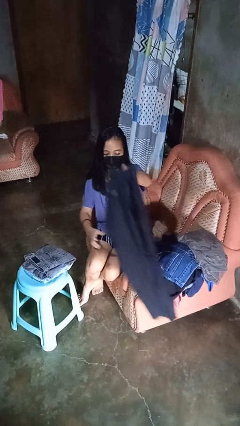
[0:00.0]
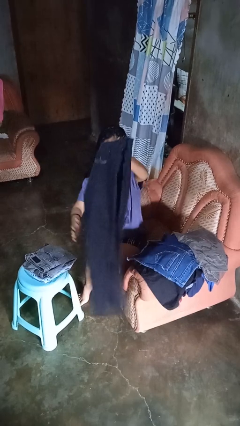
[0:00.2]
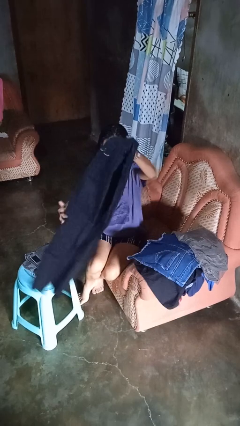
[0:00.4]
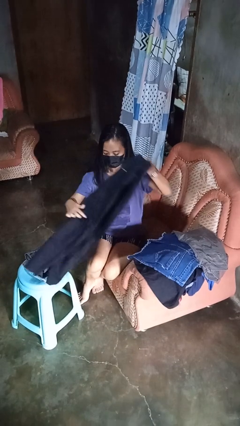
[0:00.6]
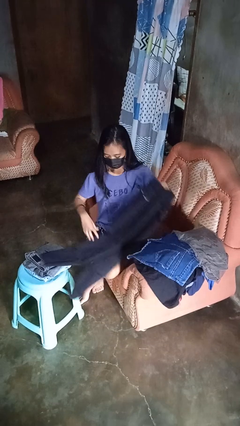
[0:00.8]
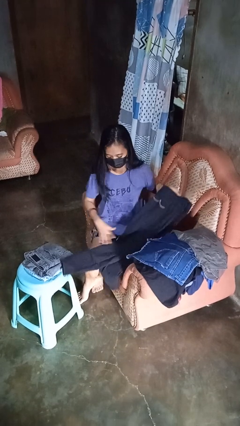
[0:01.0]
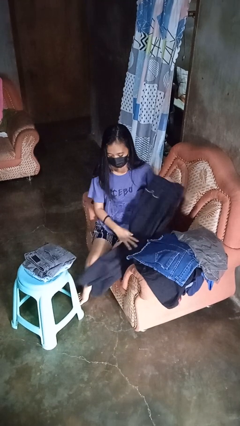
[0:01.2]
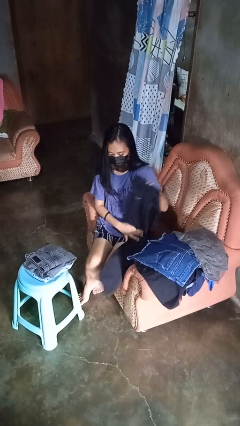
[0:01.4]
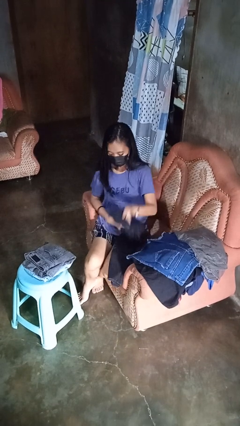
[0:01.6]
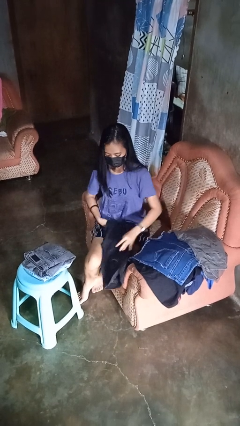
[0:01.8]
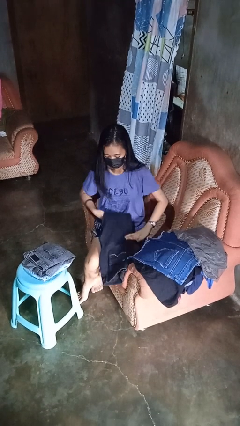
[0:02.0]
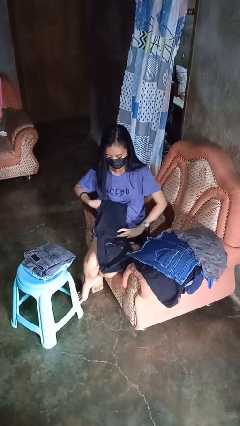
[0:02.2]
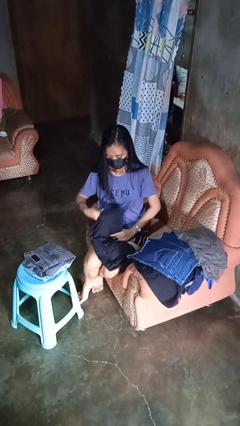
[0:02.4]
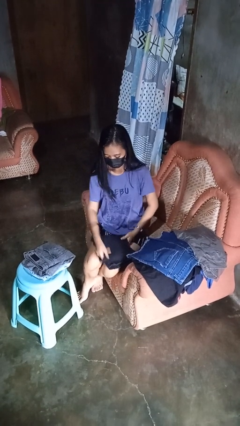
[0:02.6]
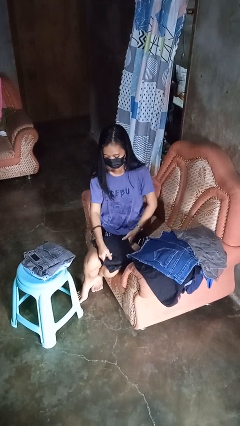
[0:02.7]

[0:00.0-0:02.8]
person folds pants

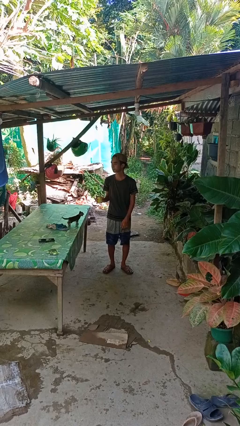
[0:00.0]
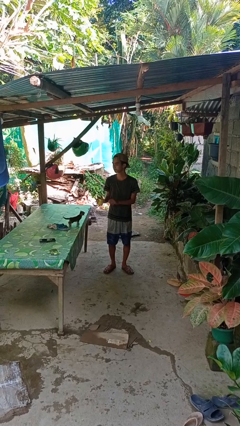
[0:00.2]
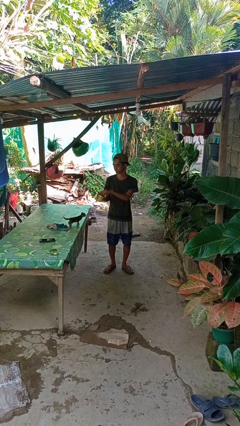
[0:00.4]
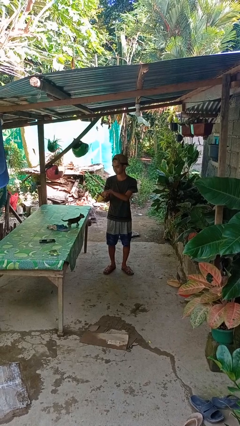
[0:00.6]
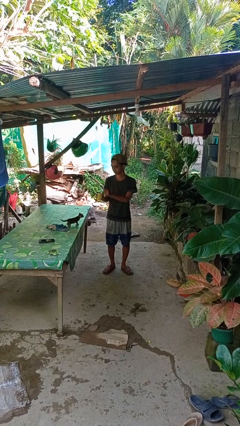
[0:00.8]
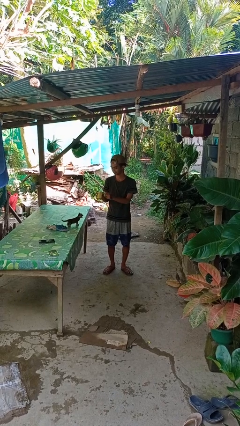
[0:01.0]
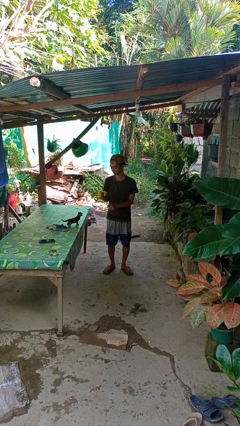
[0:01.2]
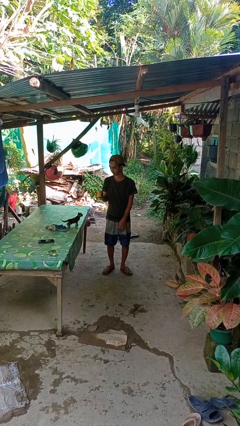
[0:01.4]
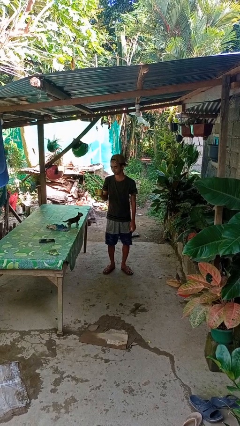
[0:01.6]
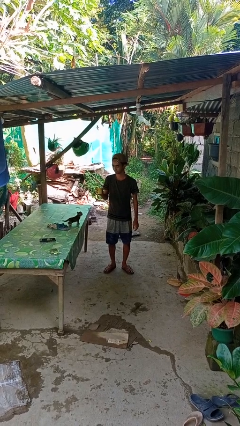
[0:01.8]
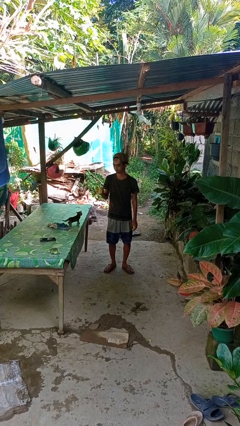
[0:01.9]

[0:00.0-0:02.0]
person opens beverage can

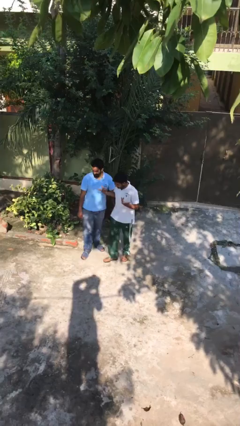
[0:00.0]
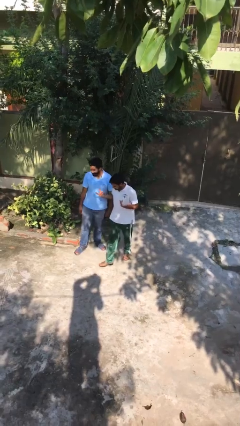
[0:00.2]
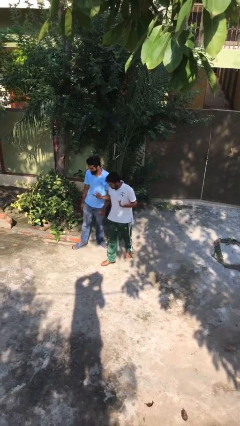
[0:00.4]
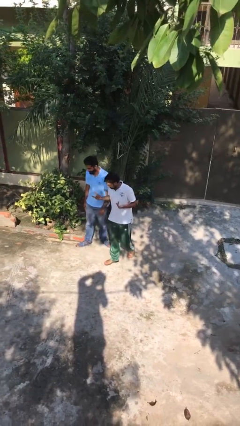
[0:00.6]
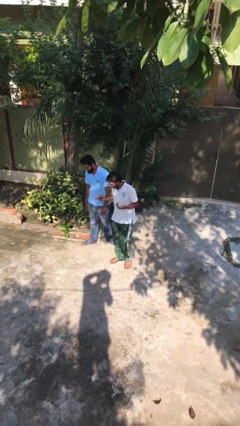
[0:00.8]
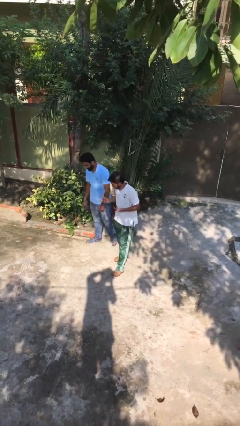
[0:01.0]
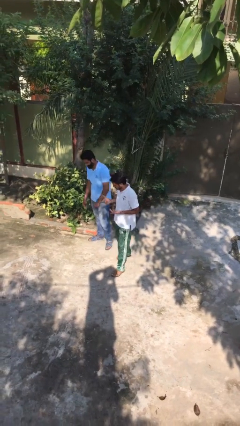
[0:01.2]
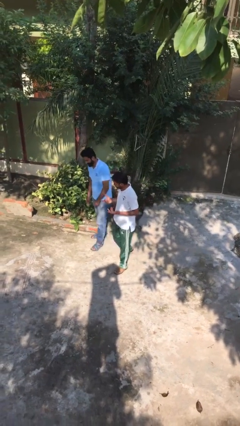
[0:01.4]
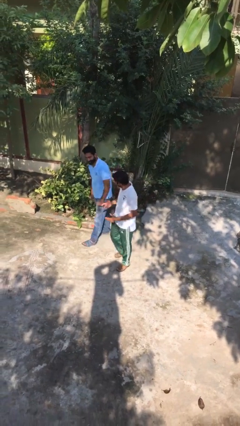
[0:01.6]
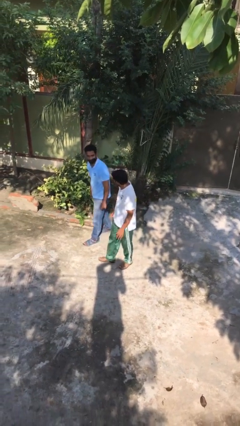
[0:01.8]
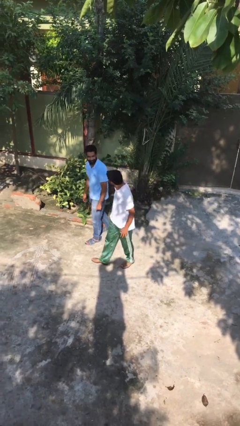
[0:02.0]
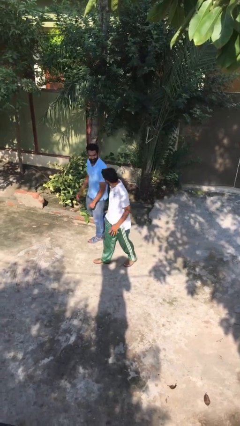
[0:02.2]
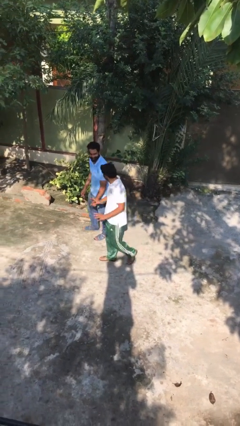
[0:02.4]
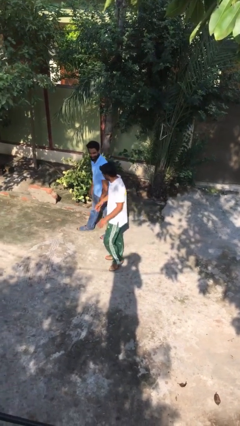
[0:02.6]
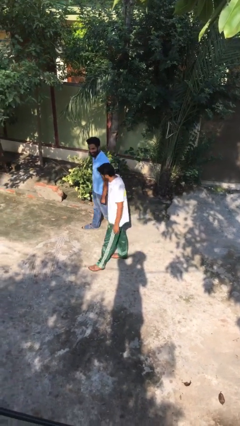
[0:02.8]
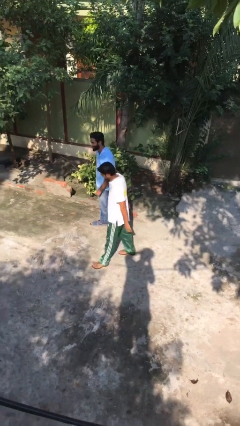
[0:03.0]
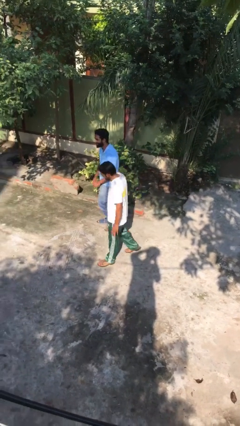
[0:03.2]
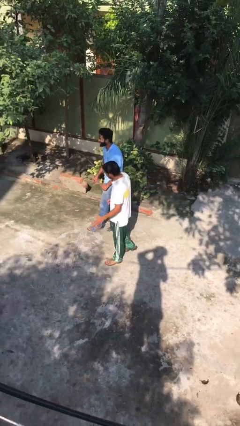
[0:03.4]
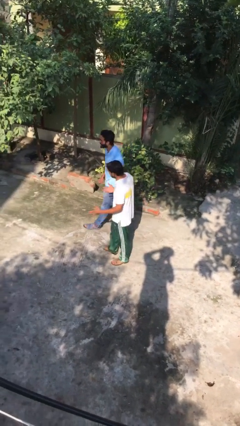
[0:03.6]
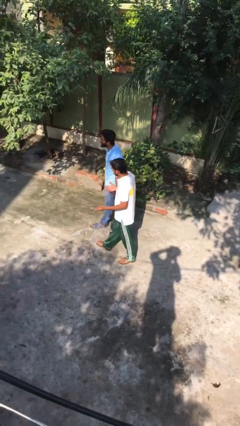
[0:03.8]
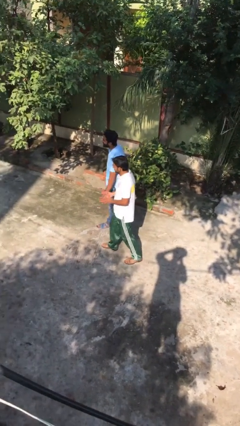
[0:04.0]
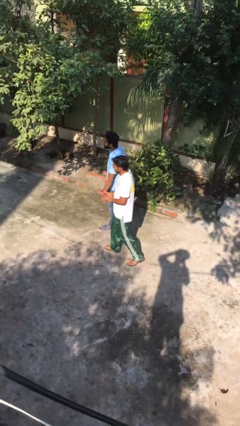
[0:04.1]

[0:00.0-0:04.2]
person talks to person

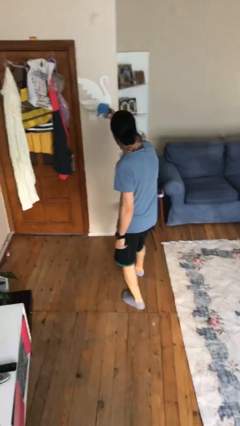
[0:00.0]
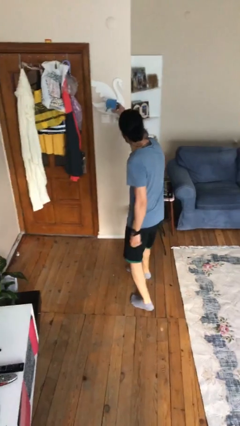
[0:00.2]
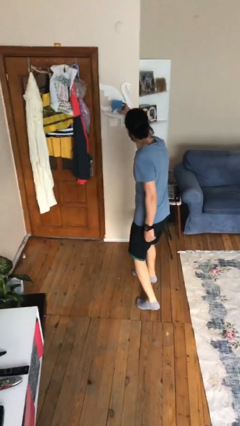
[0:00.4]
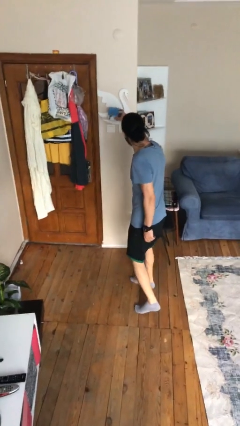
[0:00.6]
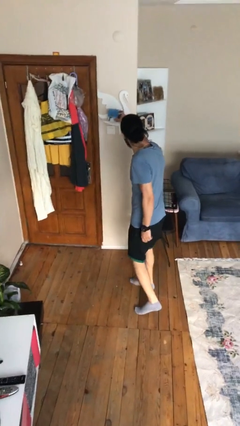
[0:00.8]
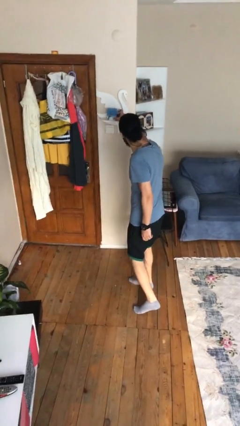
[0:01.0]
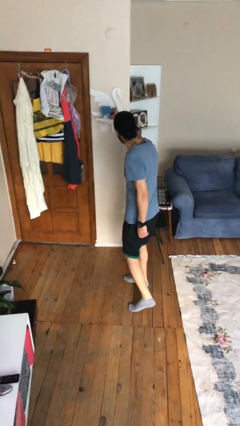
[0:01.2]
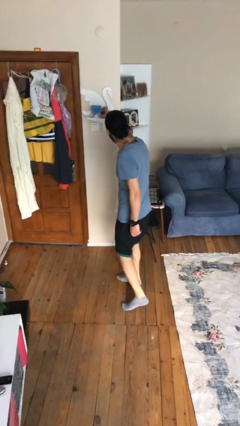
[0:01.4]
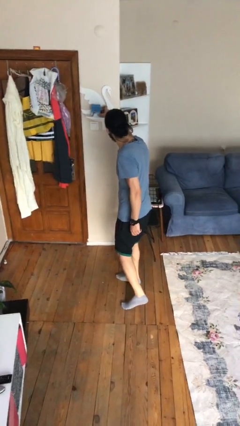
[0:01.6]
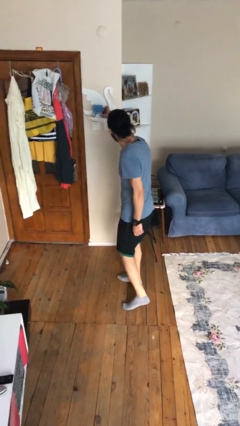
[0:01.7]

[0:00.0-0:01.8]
person puts down object on shelf

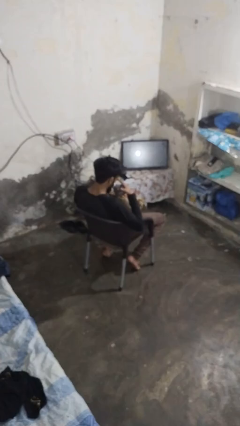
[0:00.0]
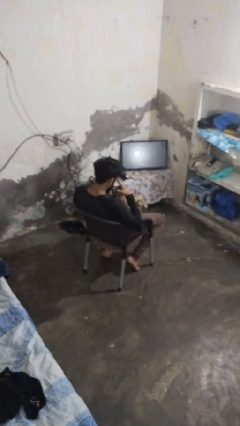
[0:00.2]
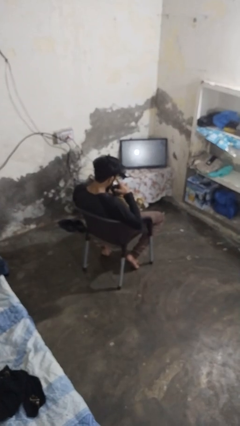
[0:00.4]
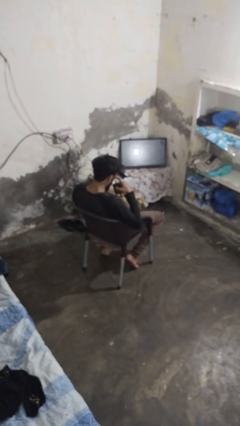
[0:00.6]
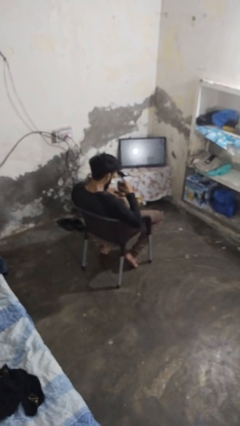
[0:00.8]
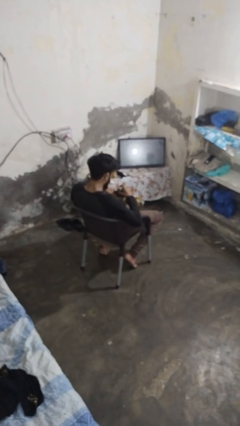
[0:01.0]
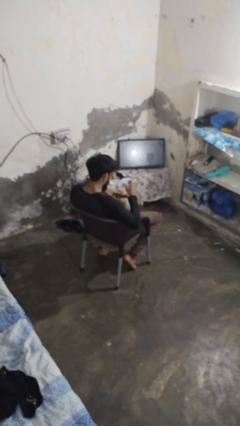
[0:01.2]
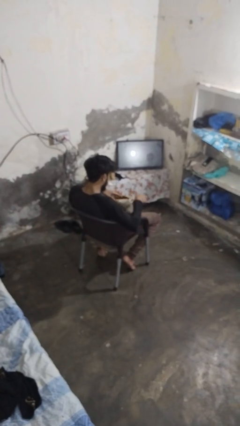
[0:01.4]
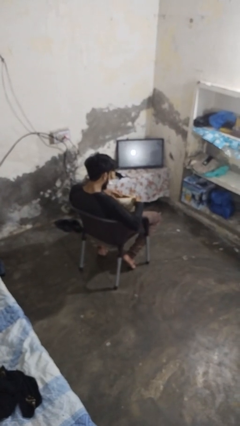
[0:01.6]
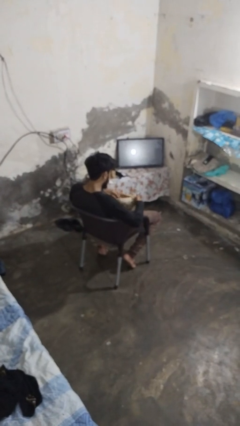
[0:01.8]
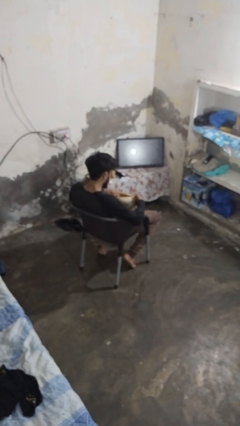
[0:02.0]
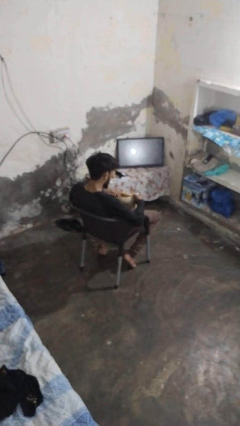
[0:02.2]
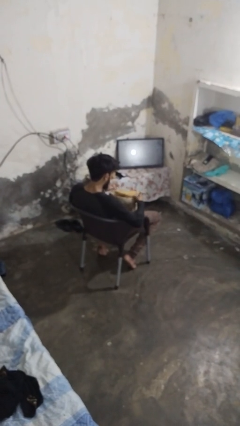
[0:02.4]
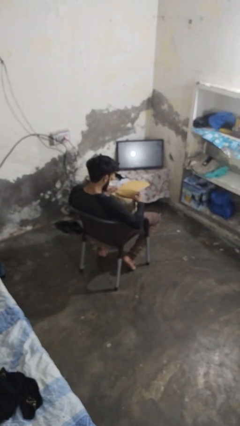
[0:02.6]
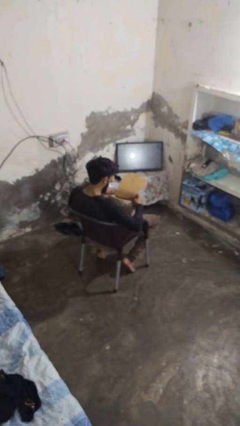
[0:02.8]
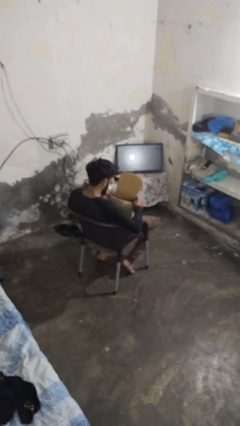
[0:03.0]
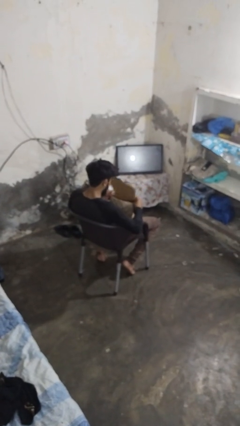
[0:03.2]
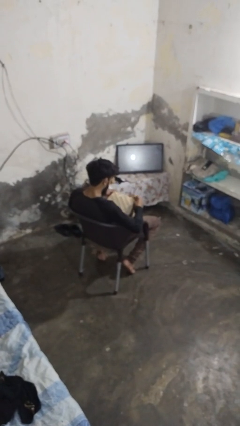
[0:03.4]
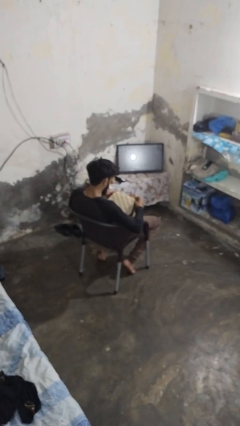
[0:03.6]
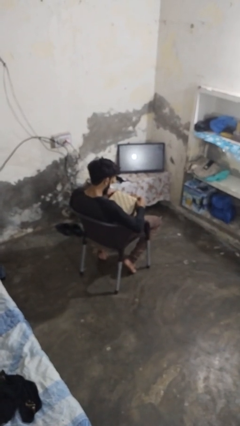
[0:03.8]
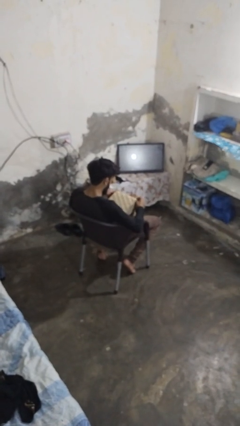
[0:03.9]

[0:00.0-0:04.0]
person puts object into purse

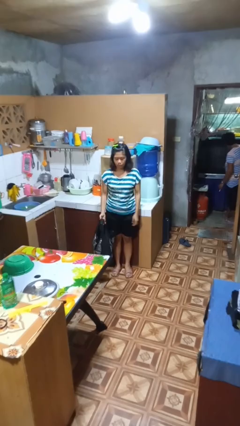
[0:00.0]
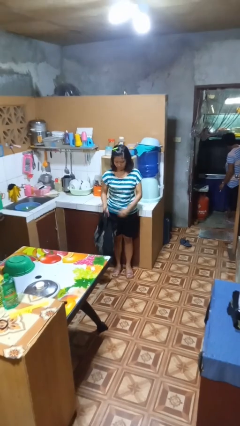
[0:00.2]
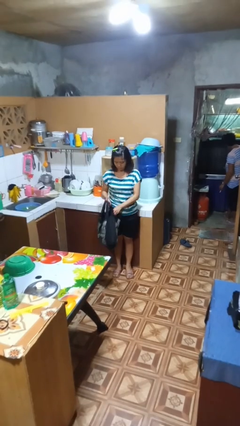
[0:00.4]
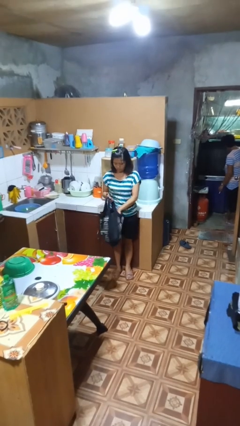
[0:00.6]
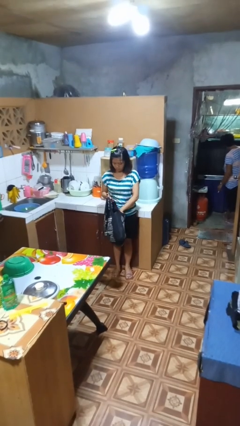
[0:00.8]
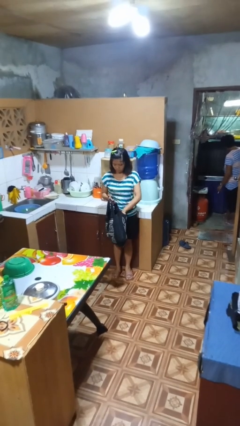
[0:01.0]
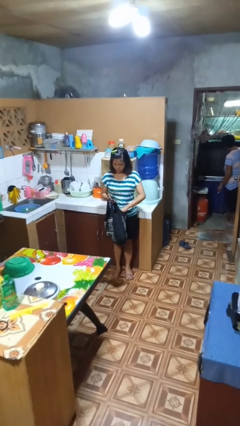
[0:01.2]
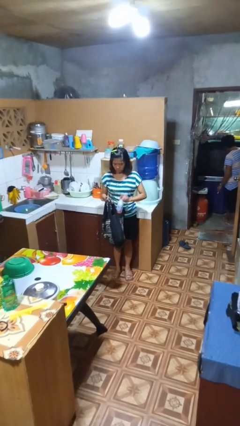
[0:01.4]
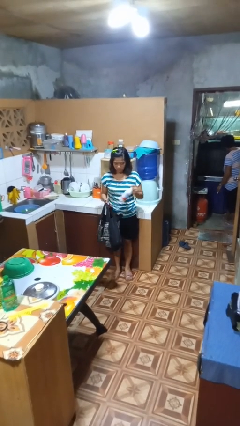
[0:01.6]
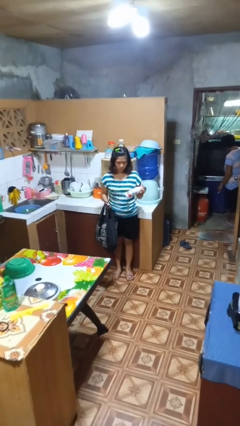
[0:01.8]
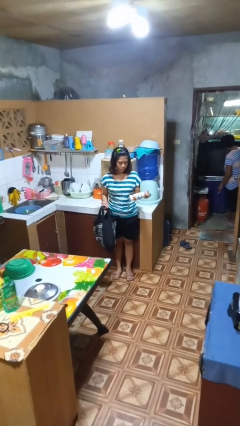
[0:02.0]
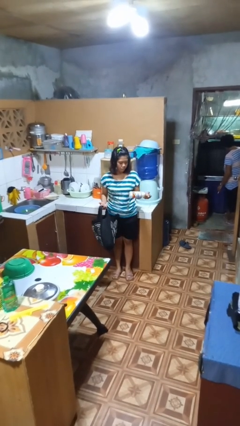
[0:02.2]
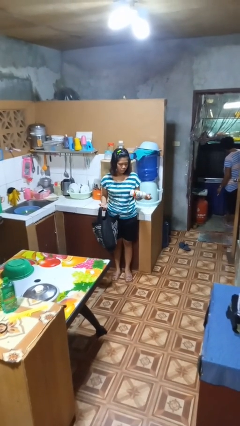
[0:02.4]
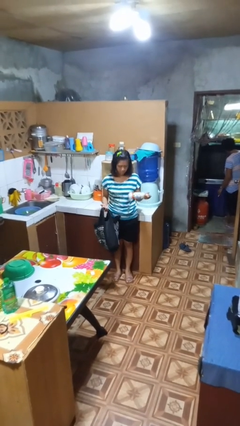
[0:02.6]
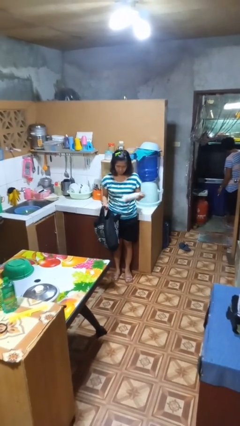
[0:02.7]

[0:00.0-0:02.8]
person takes object from bag
